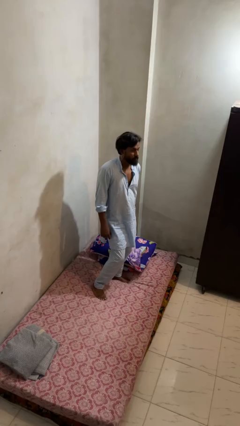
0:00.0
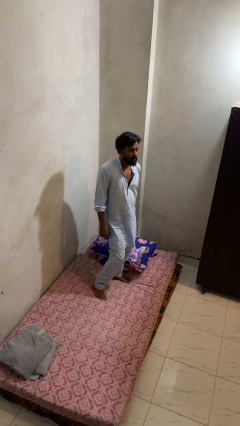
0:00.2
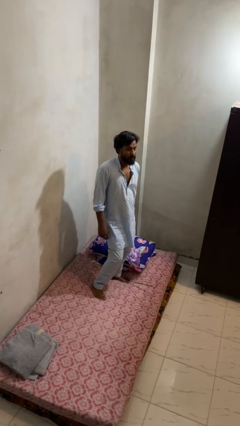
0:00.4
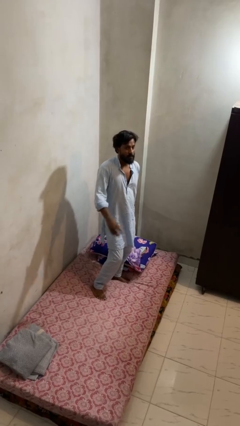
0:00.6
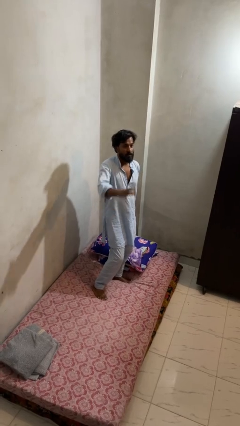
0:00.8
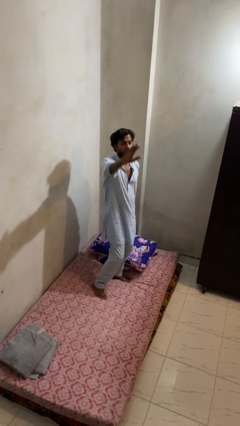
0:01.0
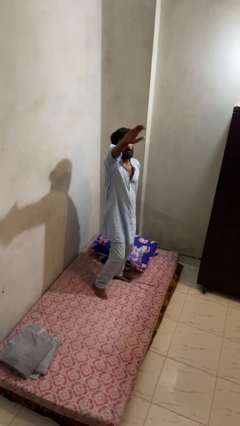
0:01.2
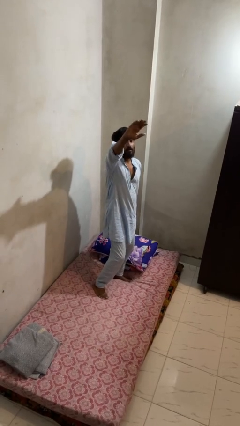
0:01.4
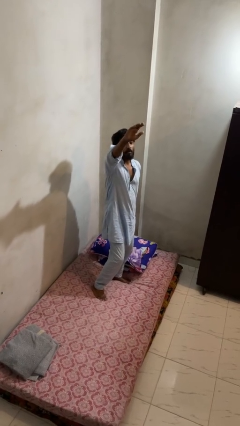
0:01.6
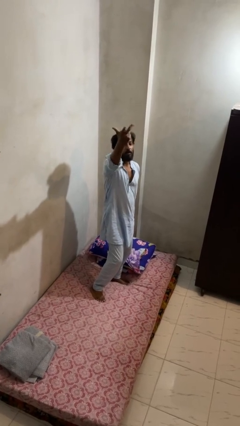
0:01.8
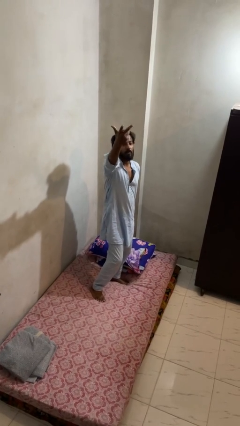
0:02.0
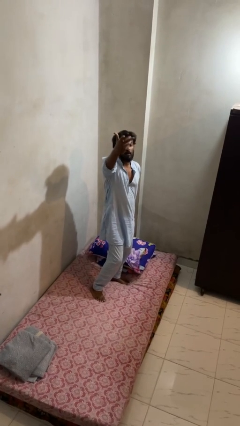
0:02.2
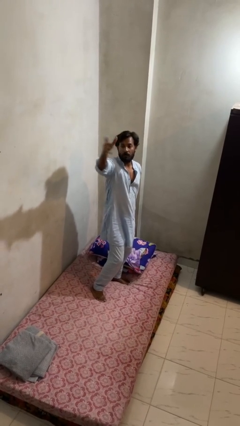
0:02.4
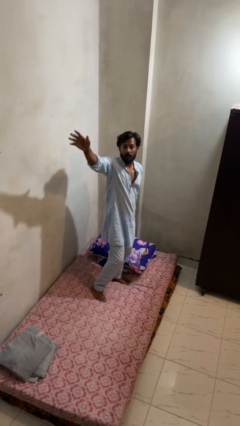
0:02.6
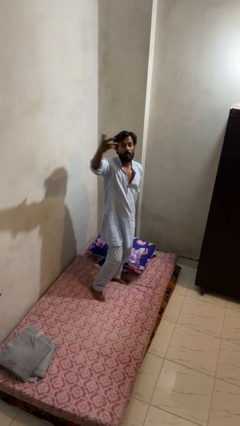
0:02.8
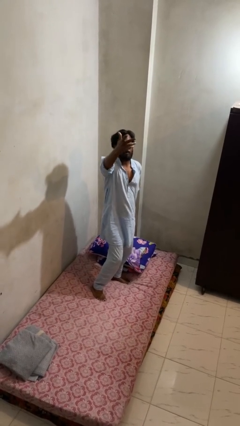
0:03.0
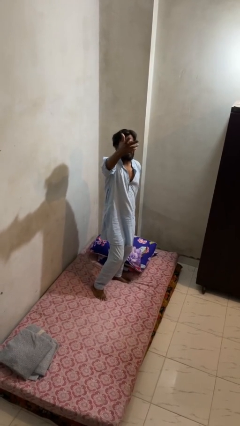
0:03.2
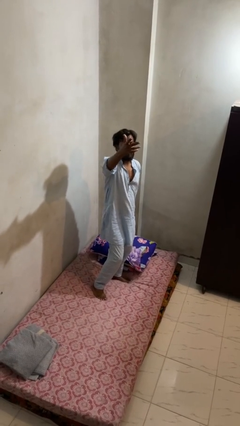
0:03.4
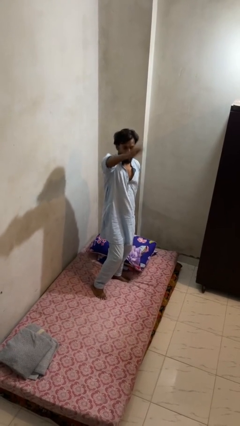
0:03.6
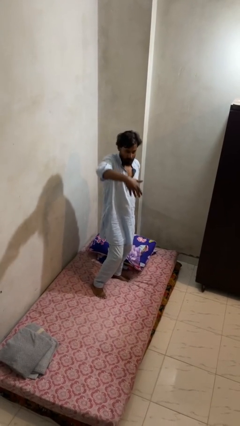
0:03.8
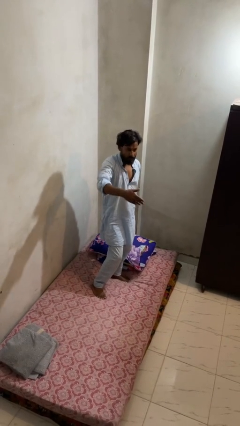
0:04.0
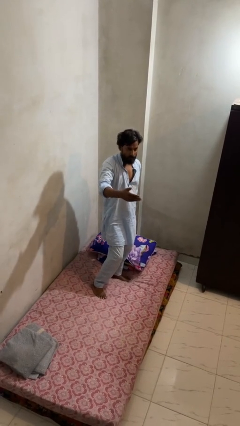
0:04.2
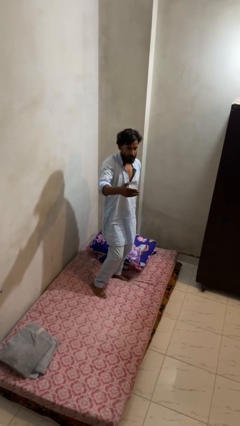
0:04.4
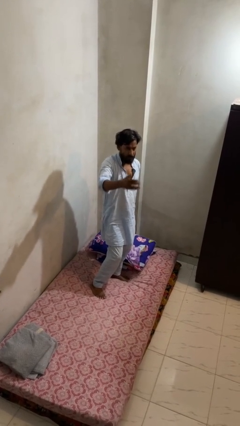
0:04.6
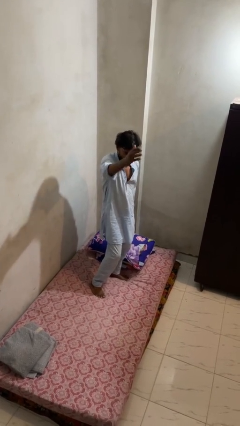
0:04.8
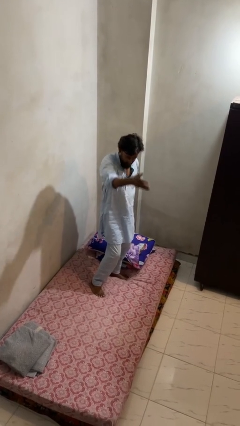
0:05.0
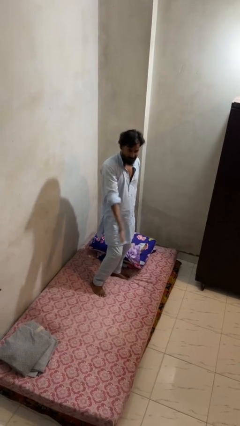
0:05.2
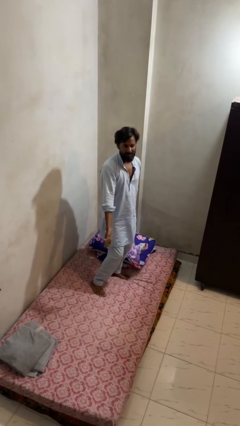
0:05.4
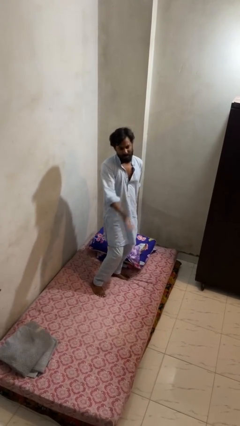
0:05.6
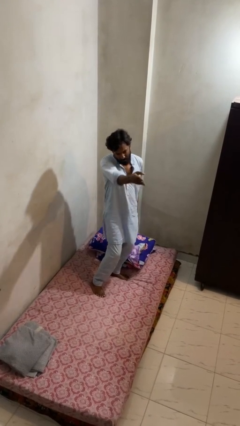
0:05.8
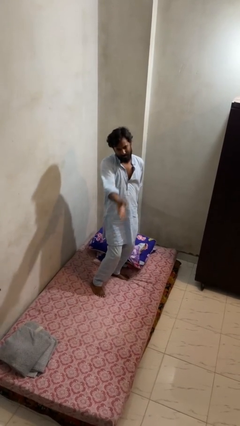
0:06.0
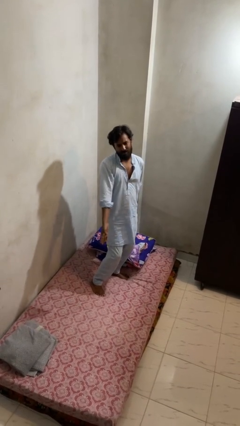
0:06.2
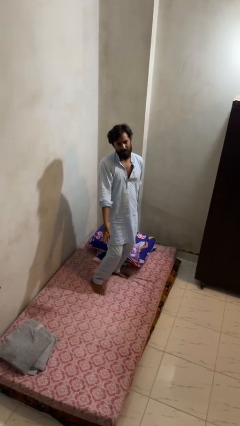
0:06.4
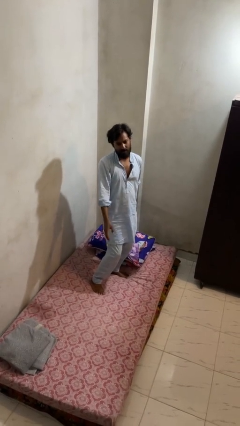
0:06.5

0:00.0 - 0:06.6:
person gestures come here

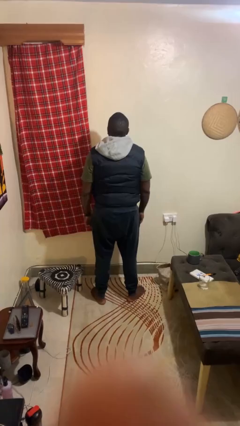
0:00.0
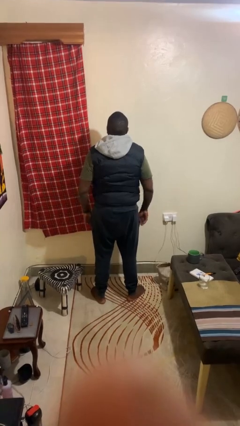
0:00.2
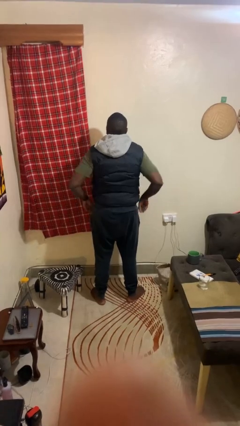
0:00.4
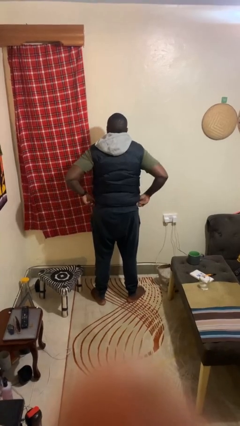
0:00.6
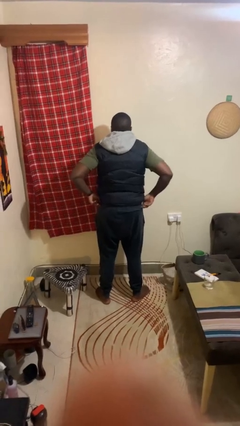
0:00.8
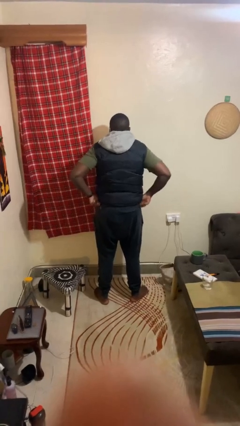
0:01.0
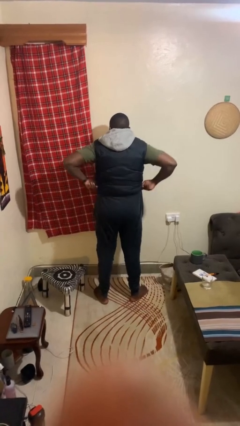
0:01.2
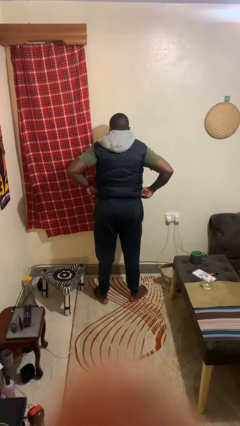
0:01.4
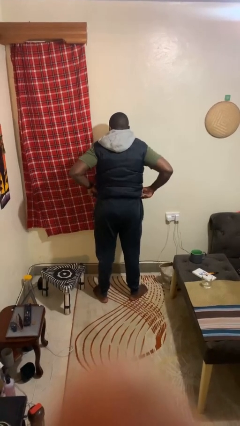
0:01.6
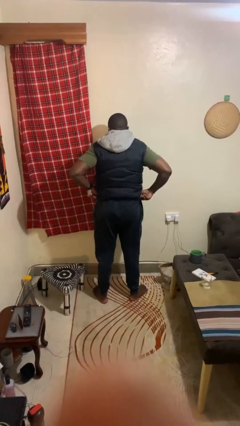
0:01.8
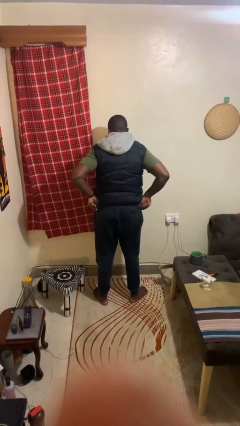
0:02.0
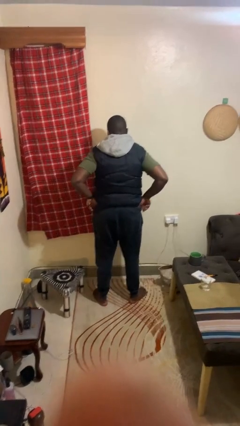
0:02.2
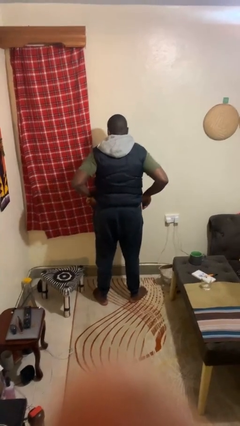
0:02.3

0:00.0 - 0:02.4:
person hikes up pants

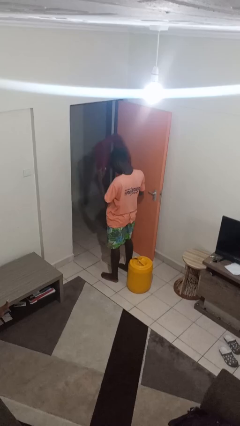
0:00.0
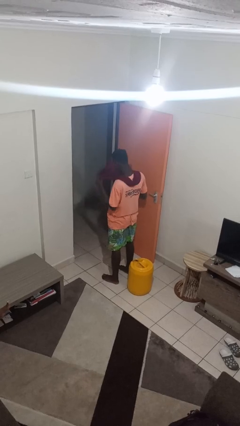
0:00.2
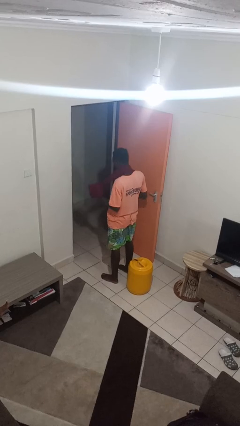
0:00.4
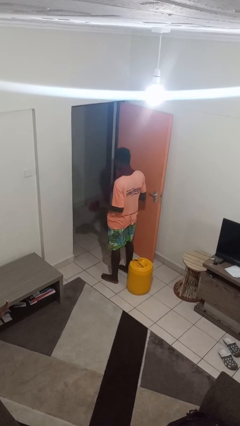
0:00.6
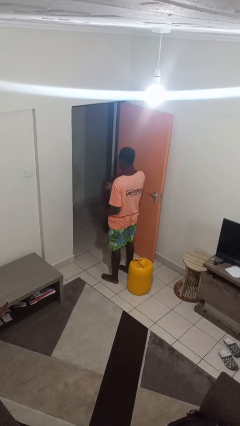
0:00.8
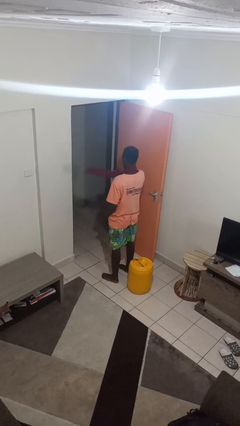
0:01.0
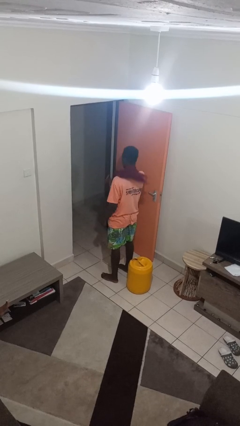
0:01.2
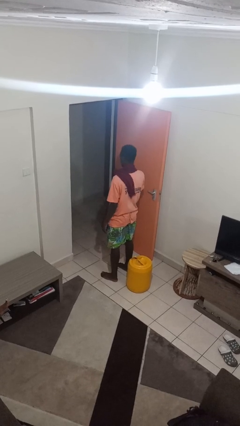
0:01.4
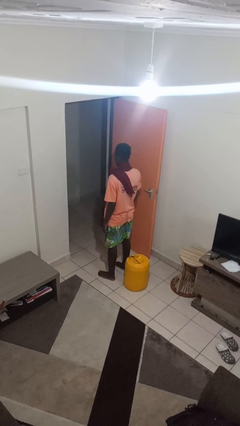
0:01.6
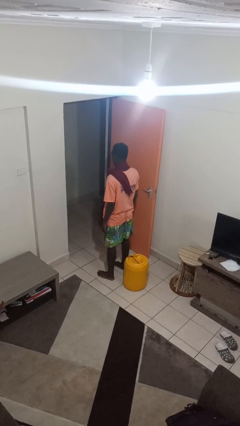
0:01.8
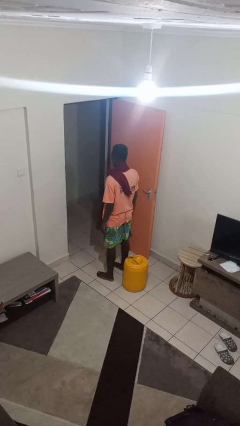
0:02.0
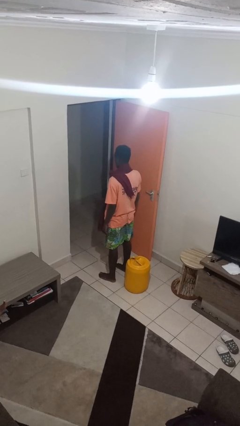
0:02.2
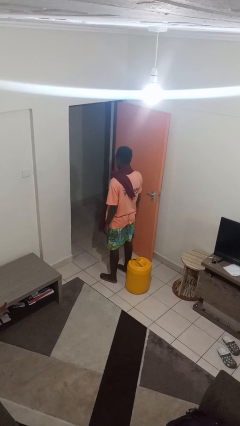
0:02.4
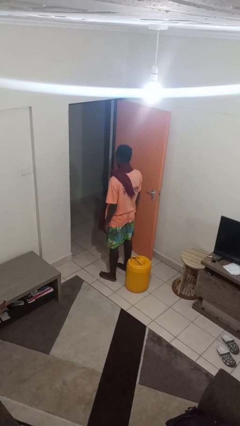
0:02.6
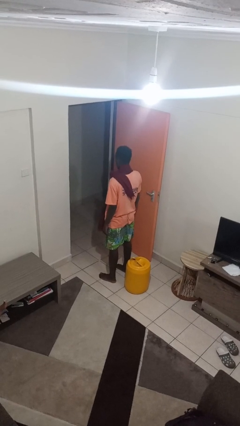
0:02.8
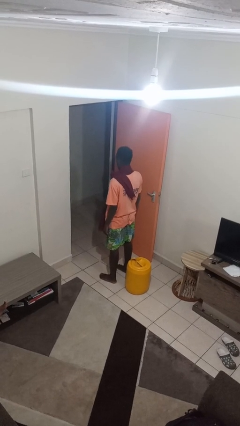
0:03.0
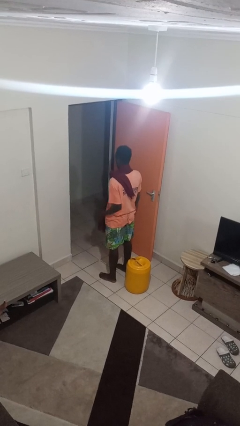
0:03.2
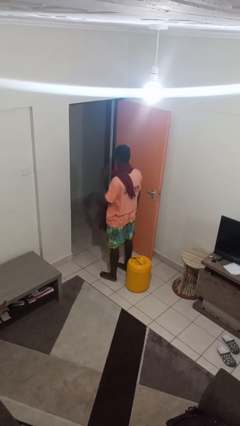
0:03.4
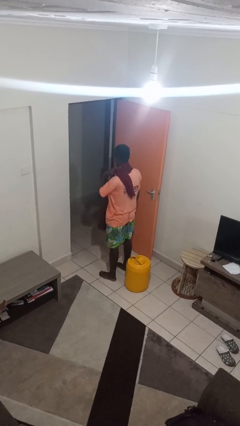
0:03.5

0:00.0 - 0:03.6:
person puts on scarf

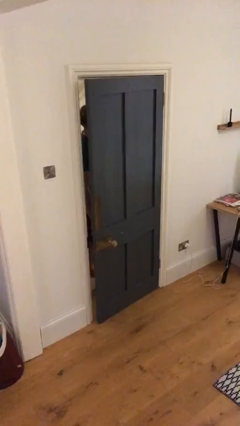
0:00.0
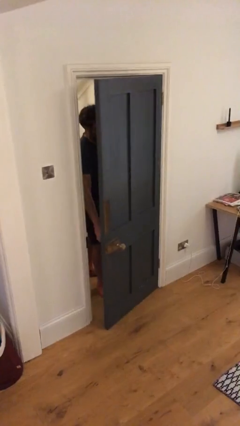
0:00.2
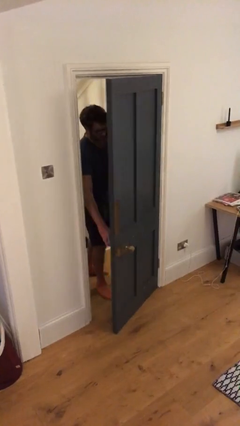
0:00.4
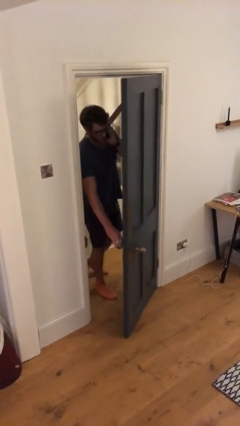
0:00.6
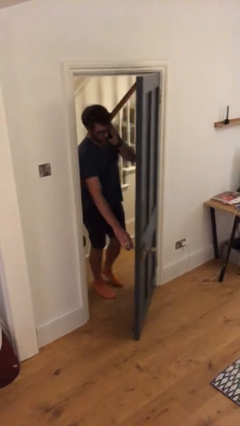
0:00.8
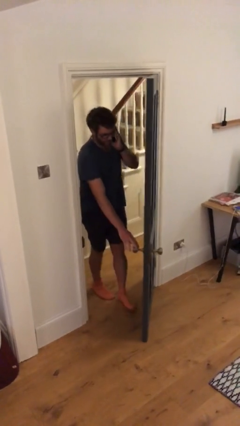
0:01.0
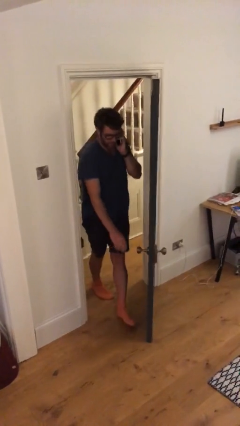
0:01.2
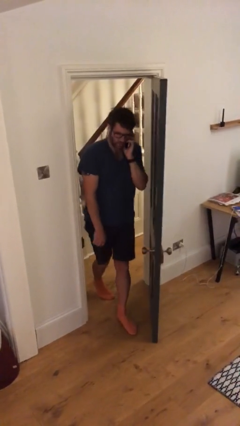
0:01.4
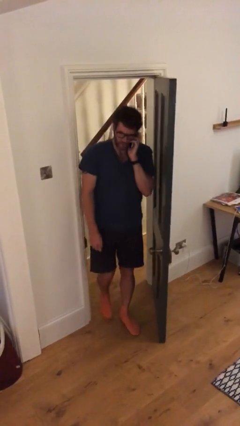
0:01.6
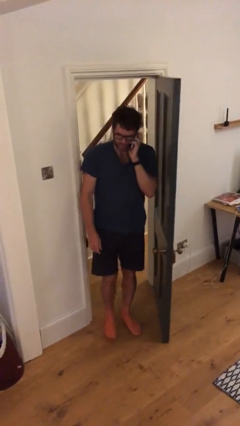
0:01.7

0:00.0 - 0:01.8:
person opens facility door

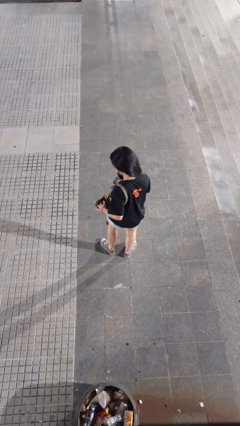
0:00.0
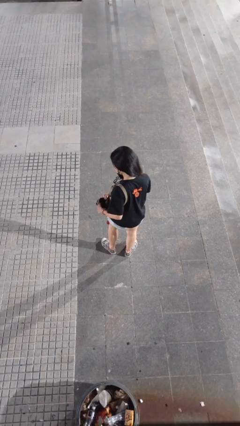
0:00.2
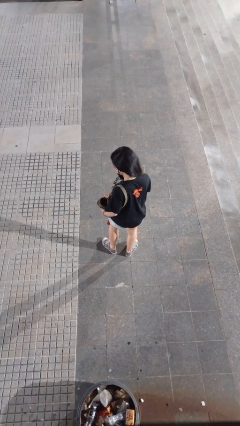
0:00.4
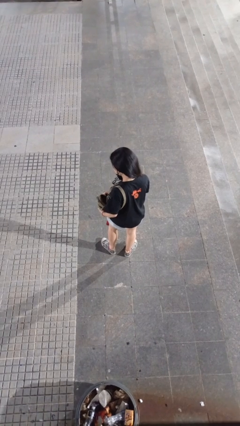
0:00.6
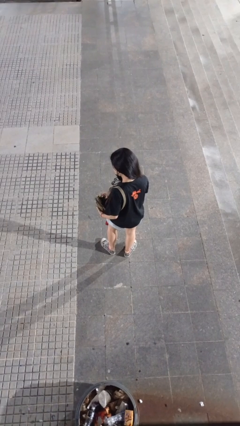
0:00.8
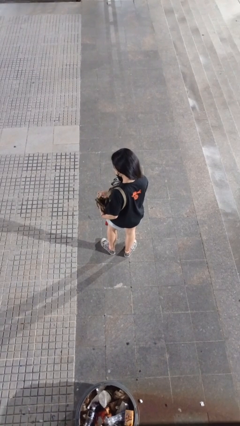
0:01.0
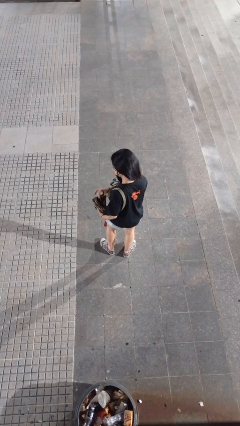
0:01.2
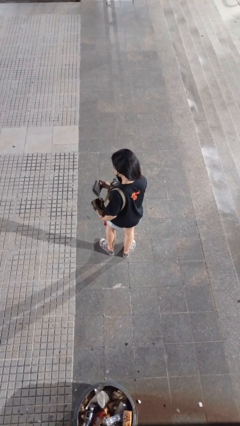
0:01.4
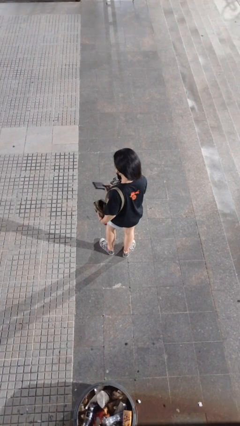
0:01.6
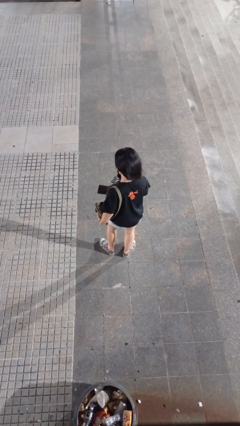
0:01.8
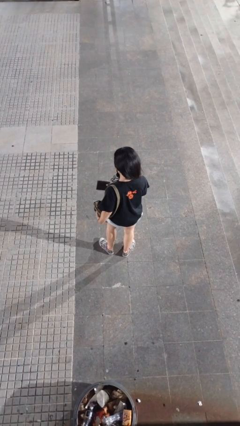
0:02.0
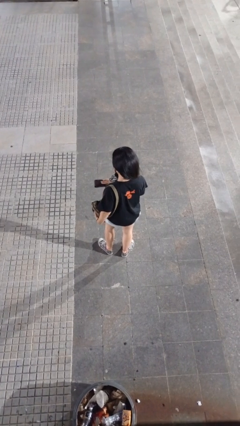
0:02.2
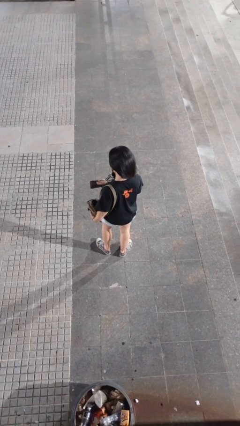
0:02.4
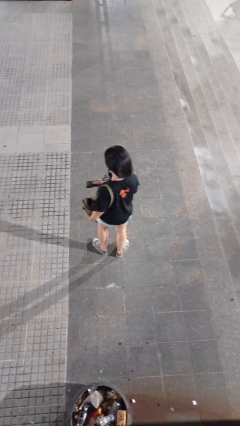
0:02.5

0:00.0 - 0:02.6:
person takes object from purse

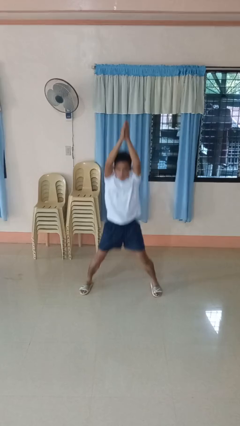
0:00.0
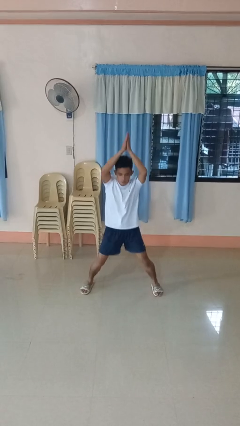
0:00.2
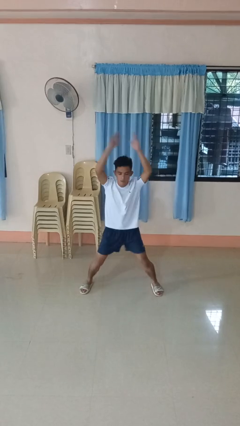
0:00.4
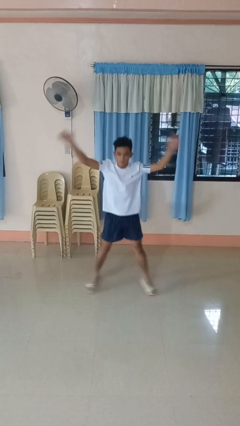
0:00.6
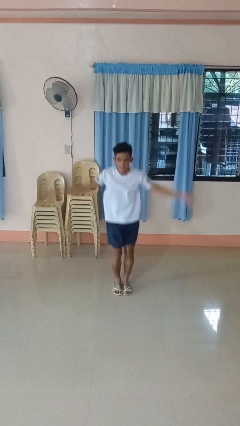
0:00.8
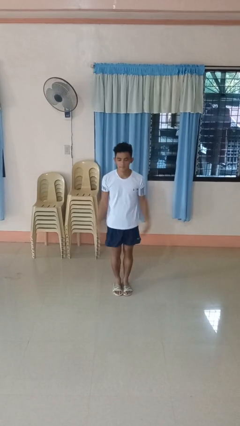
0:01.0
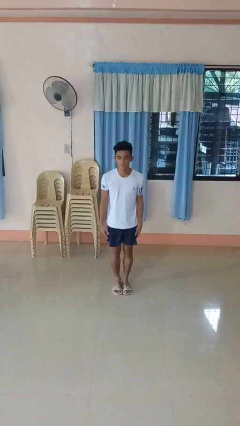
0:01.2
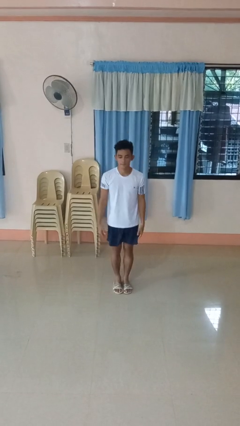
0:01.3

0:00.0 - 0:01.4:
person exercises with jumping jacks
